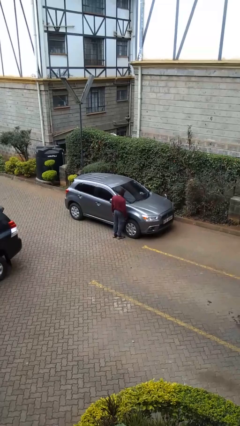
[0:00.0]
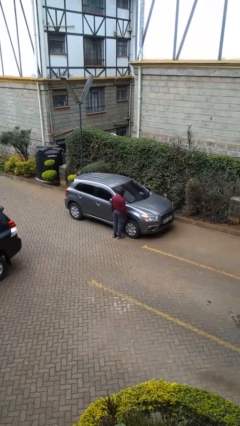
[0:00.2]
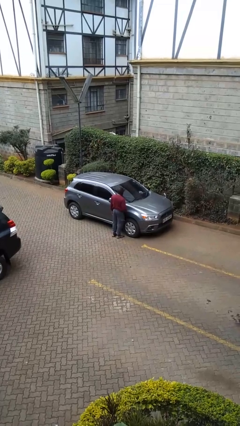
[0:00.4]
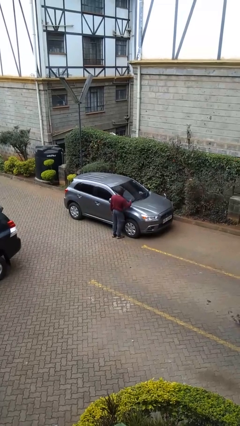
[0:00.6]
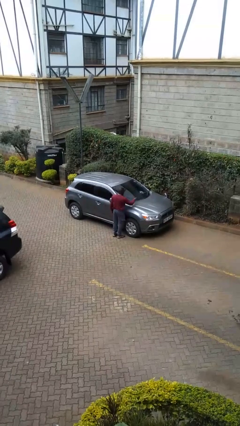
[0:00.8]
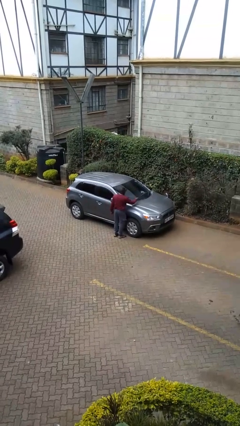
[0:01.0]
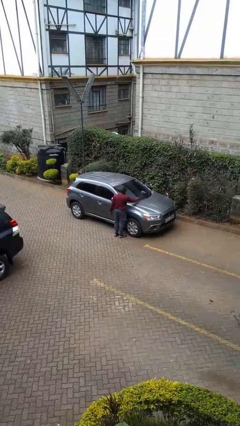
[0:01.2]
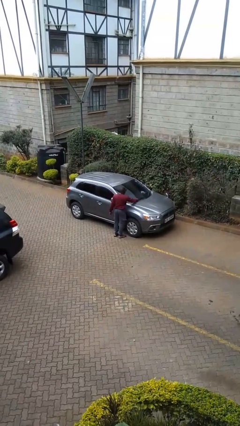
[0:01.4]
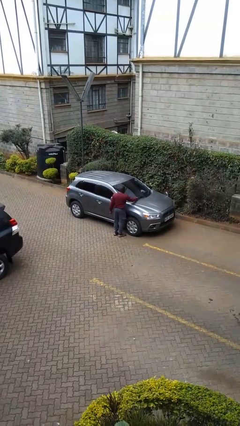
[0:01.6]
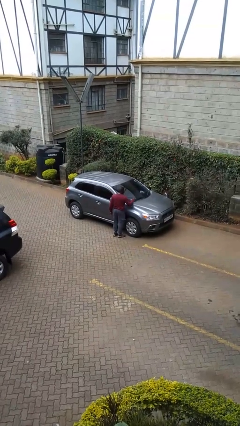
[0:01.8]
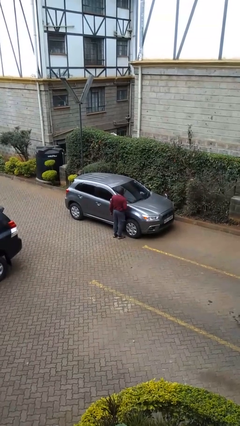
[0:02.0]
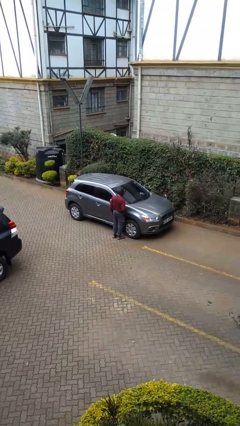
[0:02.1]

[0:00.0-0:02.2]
person flips down car wipers

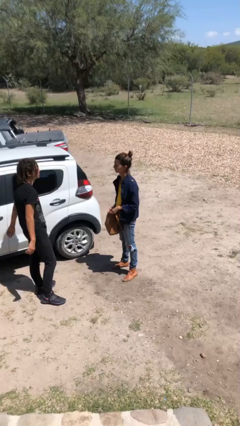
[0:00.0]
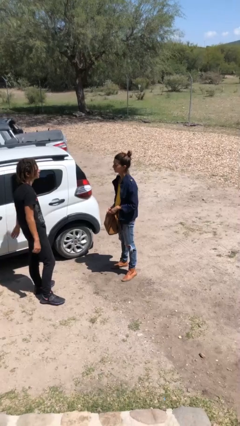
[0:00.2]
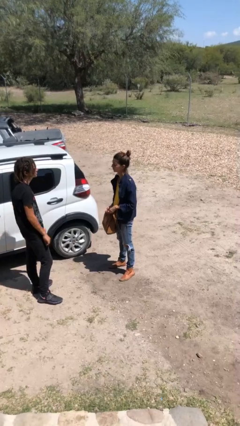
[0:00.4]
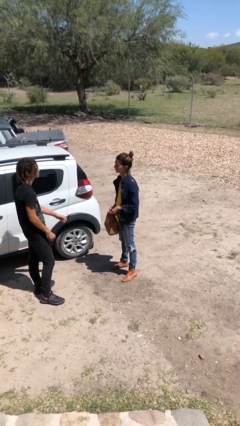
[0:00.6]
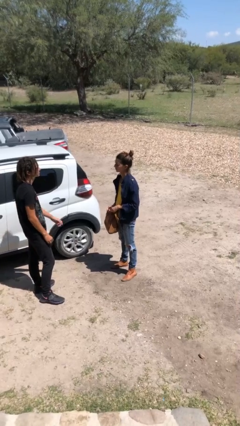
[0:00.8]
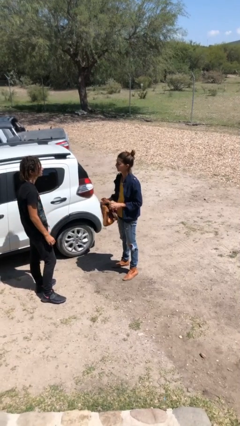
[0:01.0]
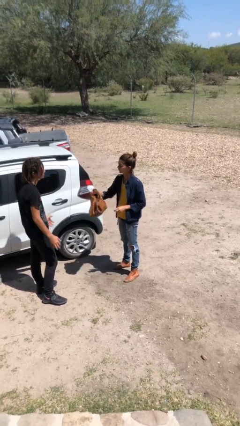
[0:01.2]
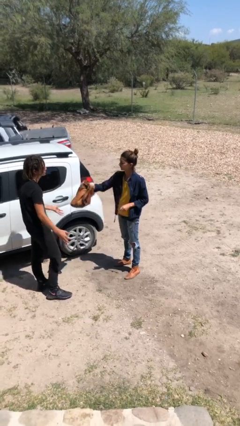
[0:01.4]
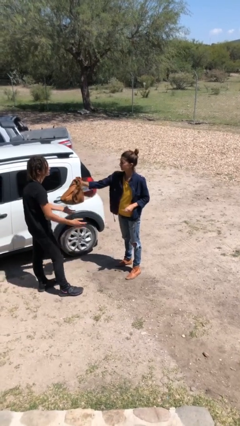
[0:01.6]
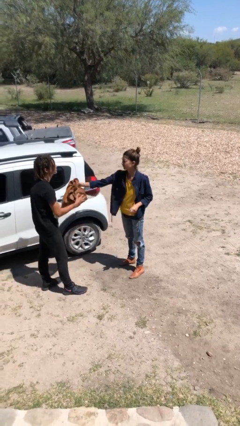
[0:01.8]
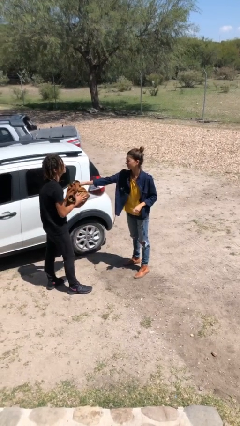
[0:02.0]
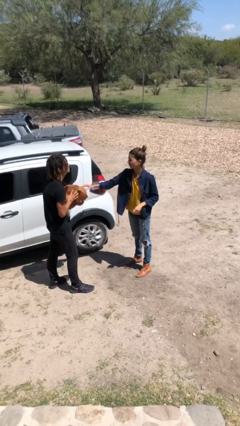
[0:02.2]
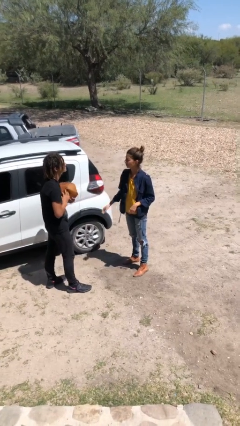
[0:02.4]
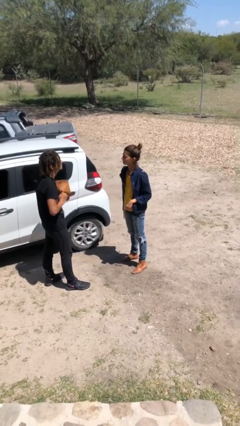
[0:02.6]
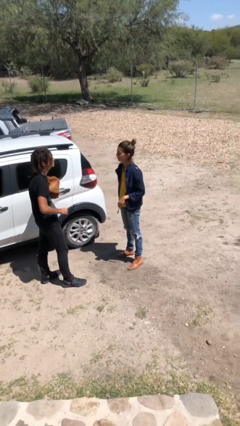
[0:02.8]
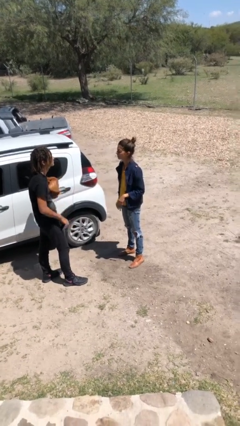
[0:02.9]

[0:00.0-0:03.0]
person transfers object to person

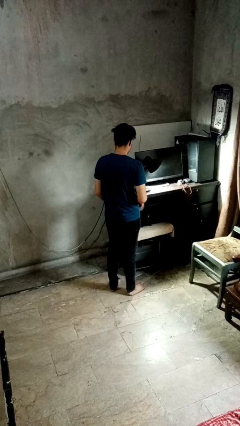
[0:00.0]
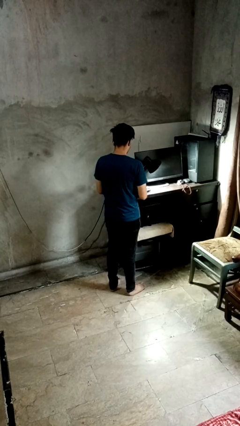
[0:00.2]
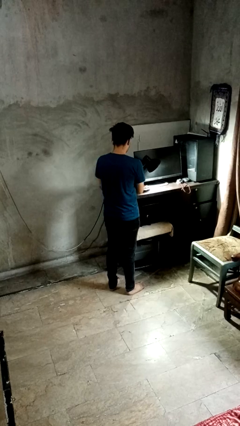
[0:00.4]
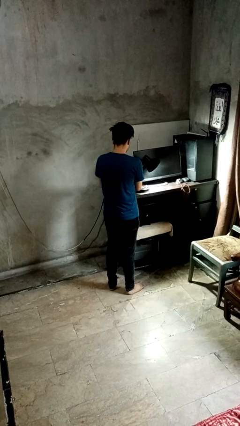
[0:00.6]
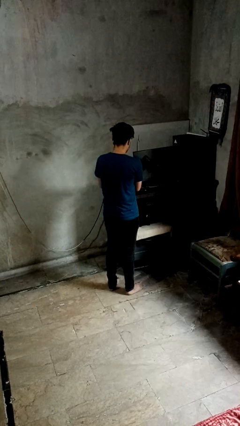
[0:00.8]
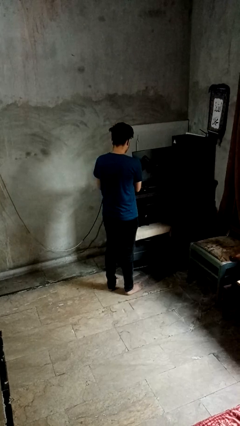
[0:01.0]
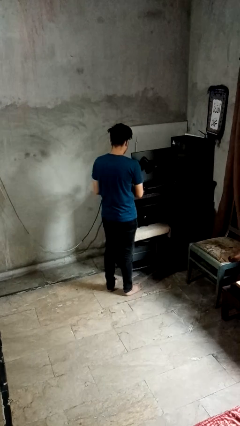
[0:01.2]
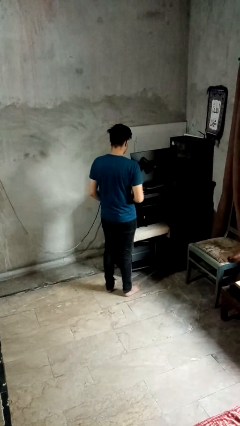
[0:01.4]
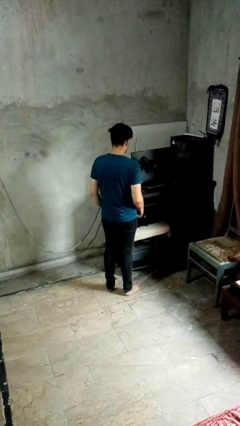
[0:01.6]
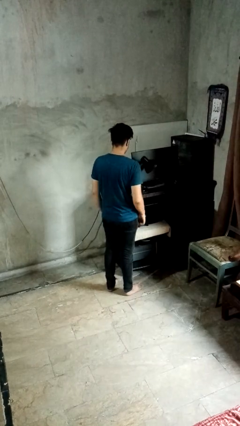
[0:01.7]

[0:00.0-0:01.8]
person turns off lamp

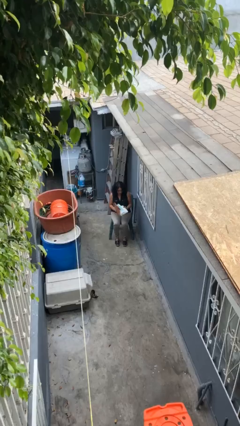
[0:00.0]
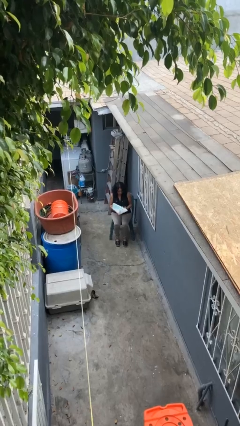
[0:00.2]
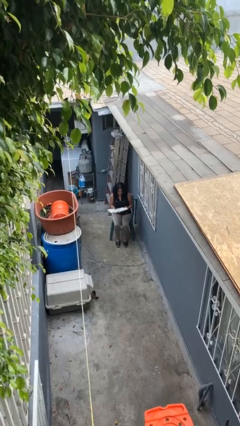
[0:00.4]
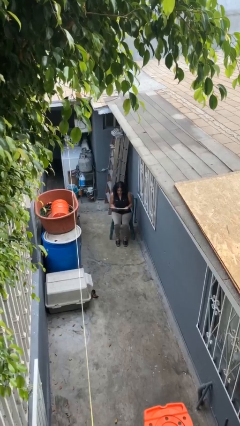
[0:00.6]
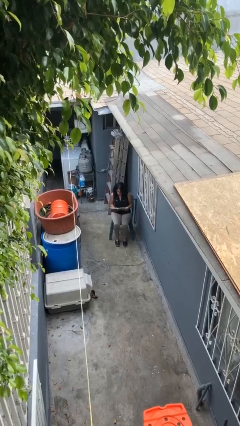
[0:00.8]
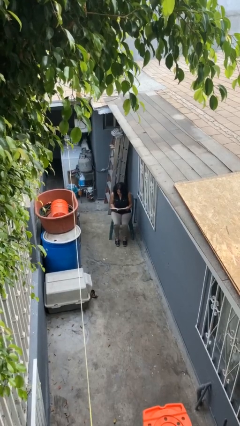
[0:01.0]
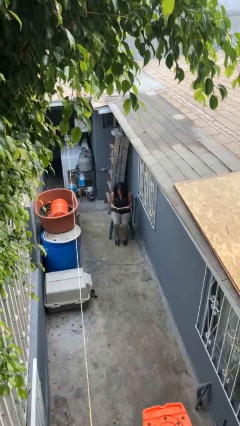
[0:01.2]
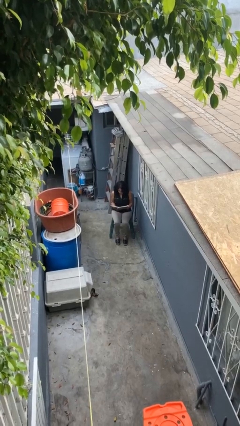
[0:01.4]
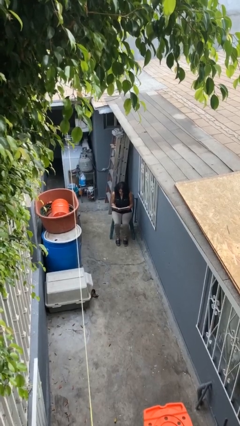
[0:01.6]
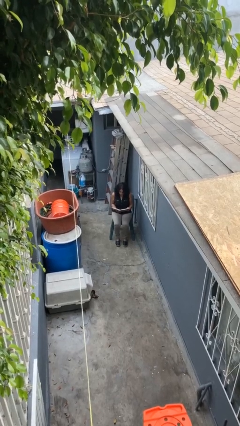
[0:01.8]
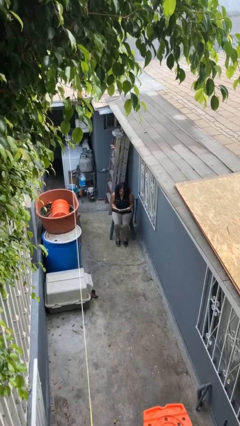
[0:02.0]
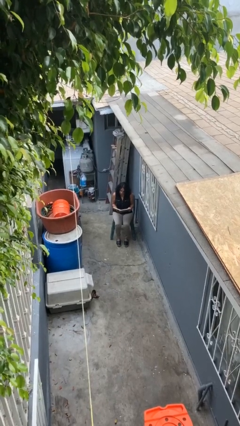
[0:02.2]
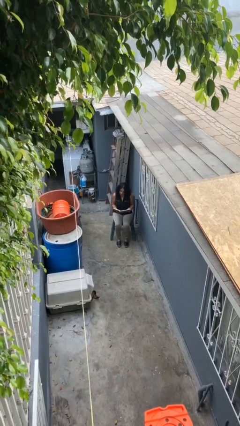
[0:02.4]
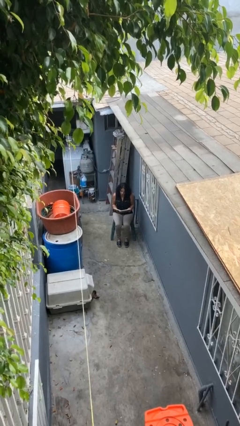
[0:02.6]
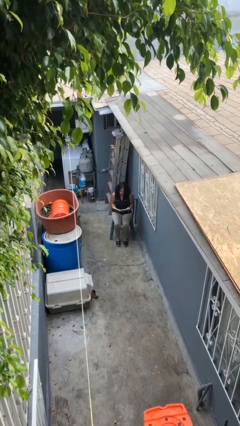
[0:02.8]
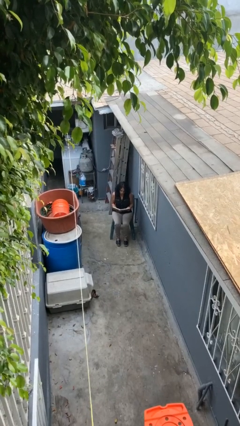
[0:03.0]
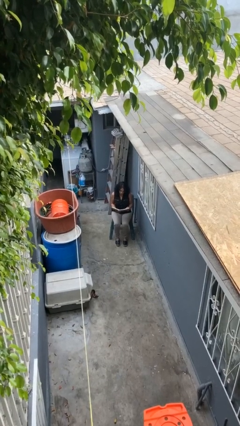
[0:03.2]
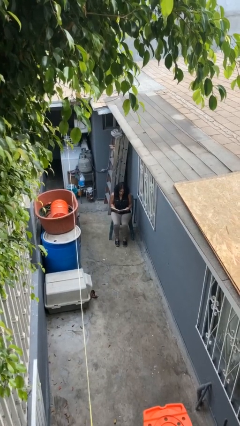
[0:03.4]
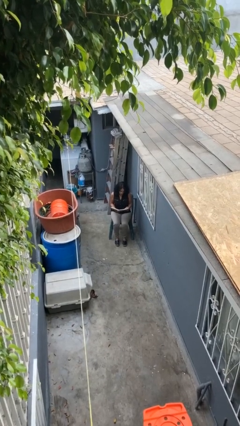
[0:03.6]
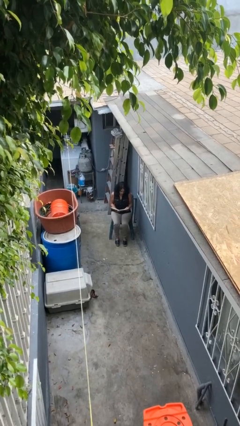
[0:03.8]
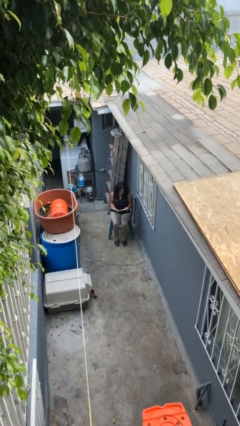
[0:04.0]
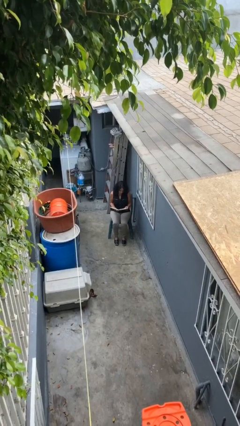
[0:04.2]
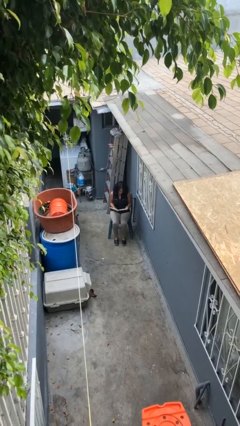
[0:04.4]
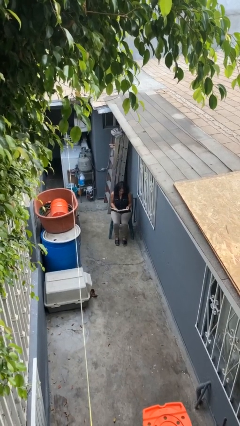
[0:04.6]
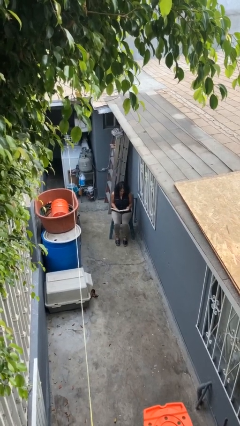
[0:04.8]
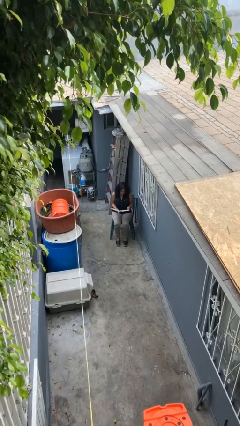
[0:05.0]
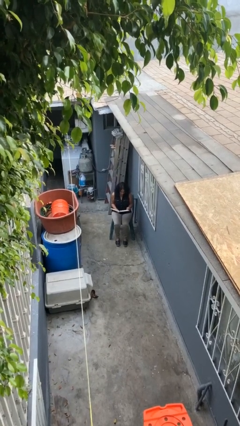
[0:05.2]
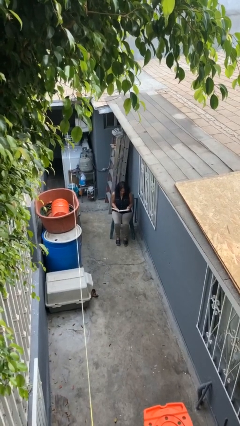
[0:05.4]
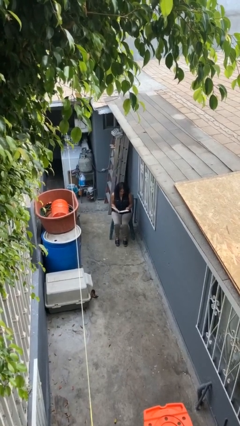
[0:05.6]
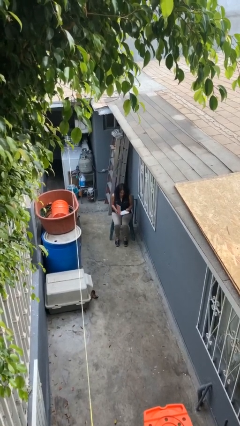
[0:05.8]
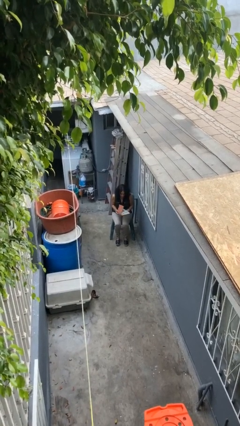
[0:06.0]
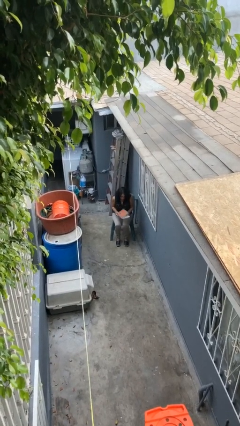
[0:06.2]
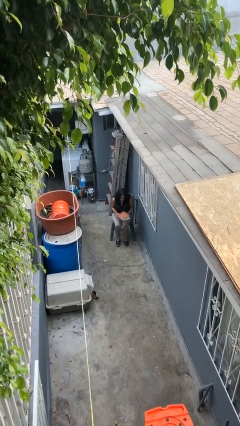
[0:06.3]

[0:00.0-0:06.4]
person reads document

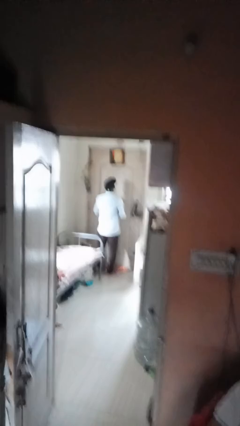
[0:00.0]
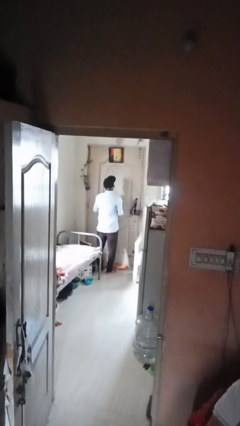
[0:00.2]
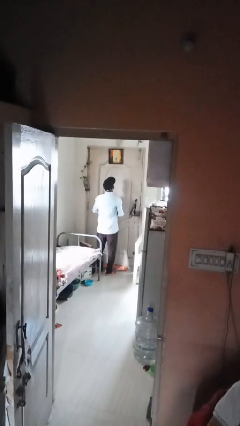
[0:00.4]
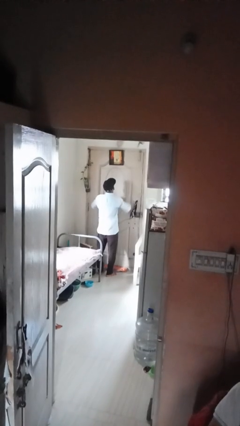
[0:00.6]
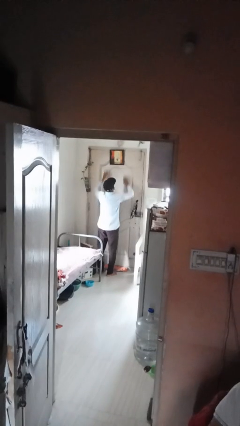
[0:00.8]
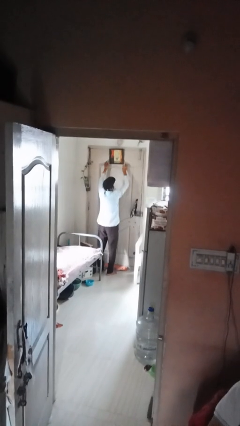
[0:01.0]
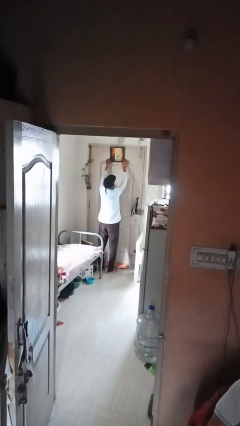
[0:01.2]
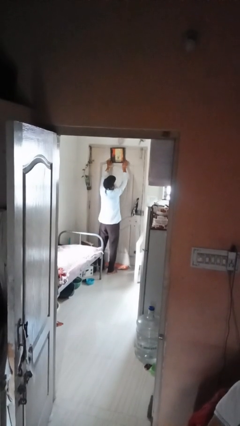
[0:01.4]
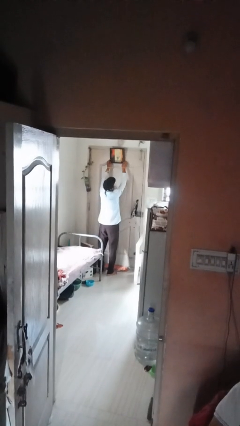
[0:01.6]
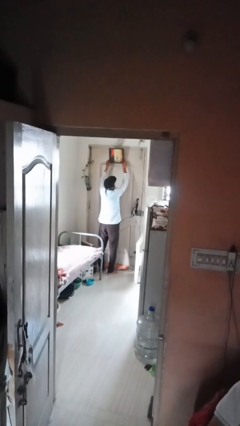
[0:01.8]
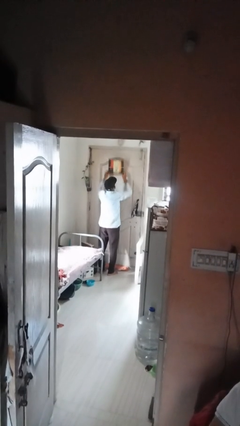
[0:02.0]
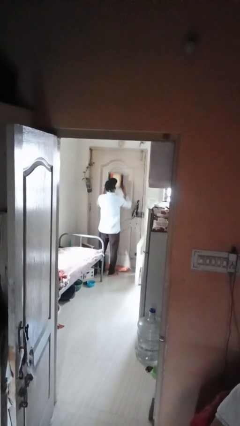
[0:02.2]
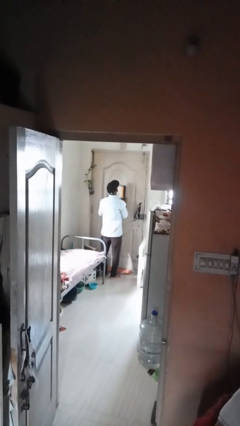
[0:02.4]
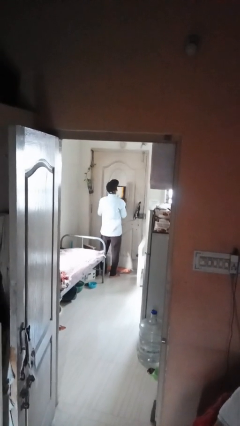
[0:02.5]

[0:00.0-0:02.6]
person takes down picture frame

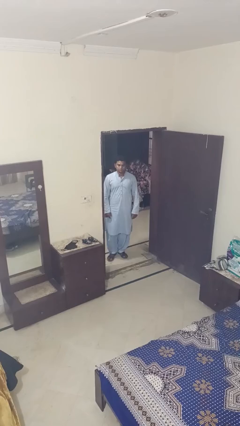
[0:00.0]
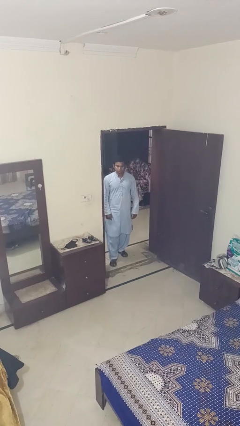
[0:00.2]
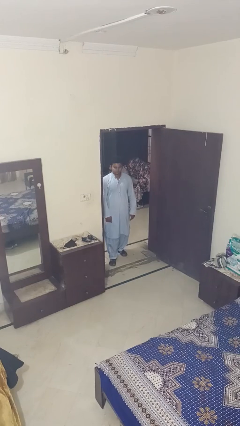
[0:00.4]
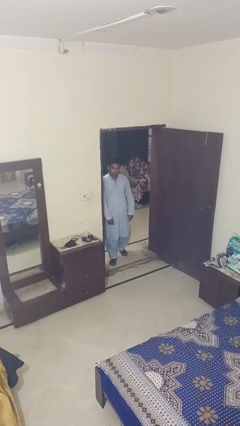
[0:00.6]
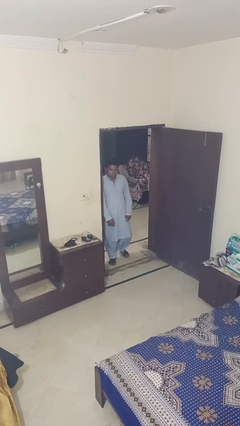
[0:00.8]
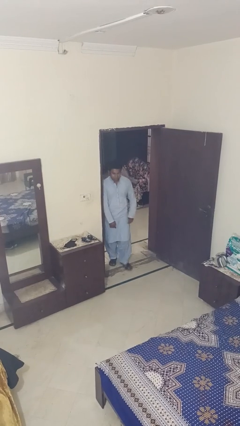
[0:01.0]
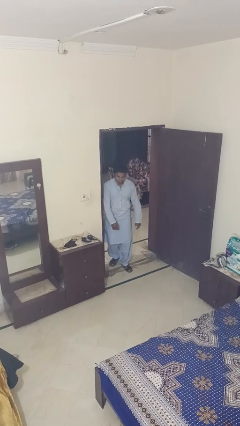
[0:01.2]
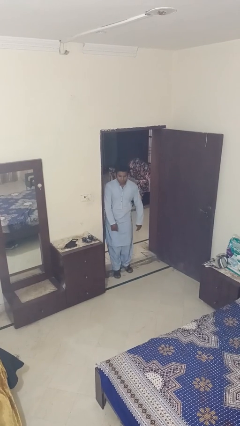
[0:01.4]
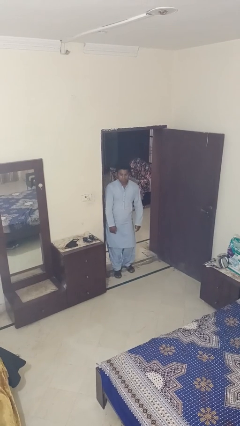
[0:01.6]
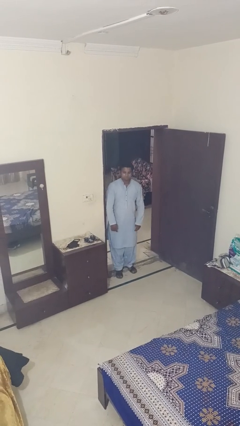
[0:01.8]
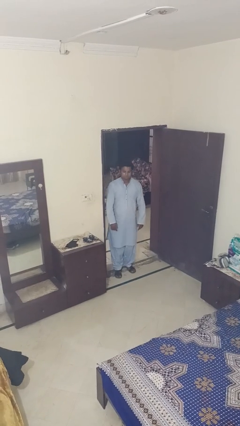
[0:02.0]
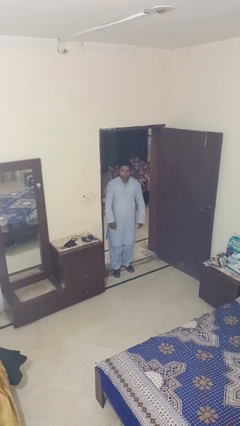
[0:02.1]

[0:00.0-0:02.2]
person bumps into wall
